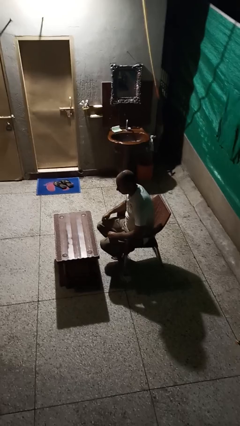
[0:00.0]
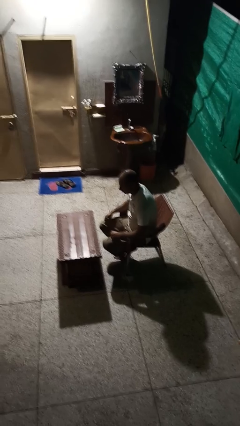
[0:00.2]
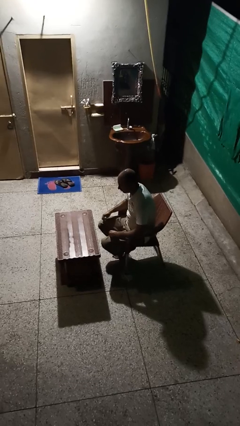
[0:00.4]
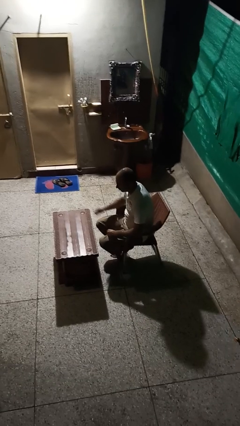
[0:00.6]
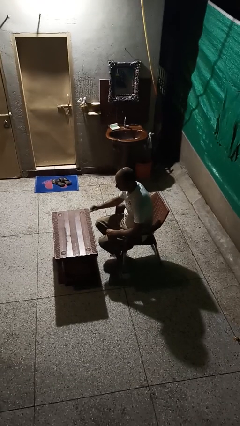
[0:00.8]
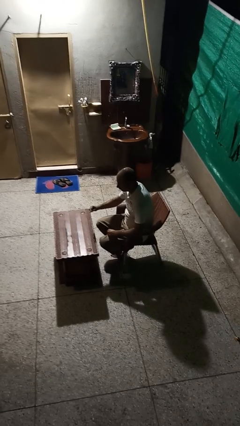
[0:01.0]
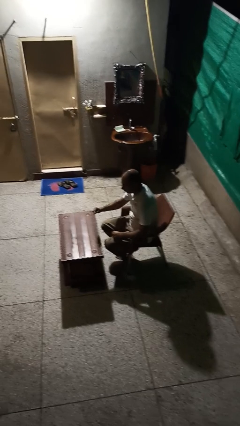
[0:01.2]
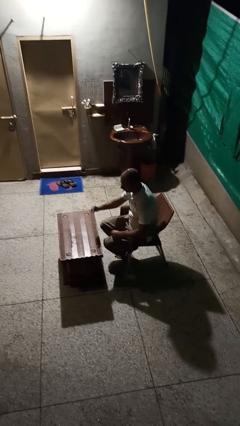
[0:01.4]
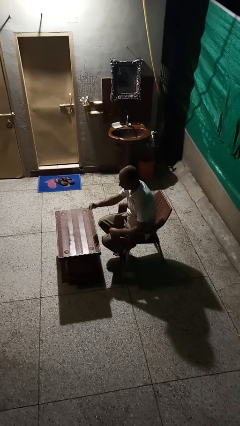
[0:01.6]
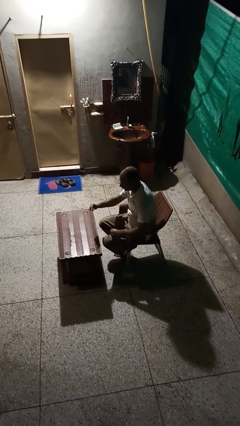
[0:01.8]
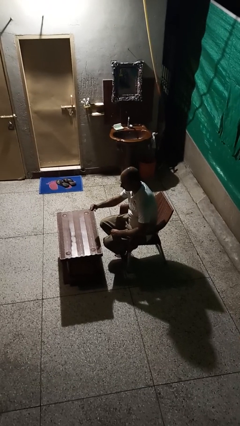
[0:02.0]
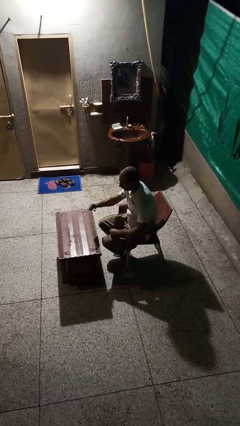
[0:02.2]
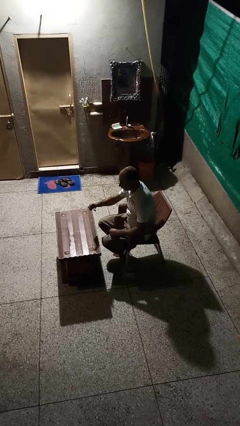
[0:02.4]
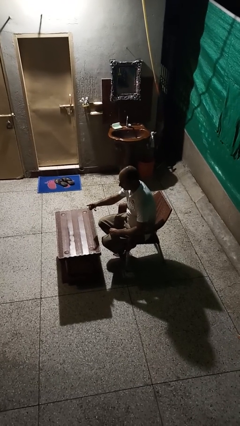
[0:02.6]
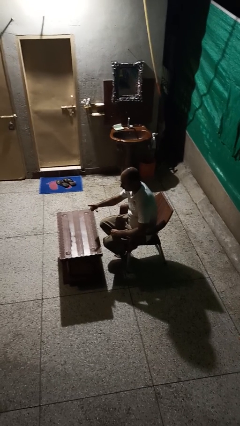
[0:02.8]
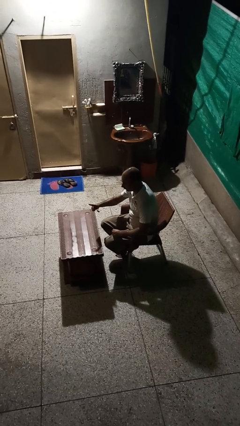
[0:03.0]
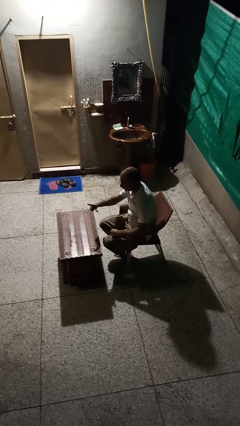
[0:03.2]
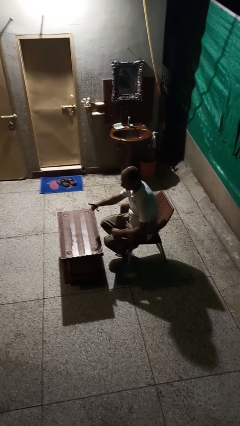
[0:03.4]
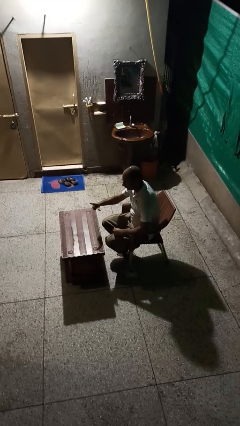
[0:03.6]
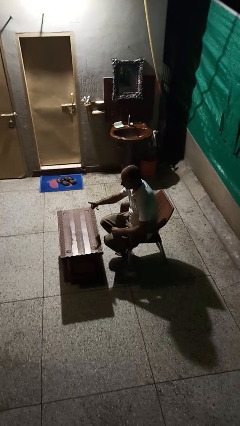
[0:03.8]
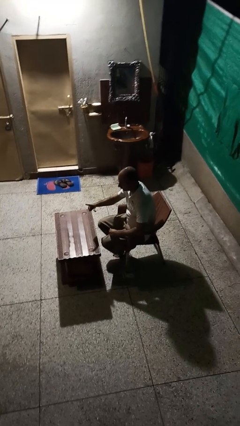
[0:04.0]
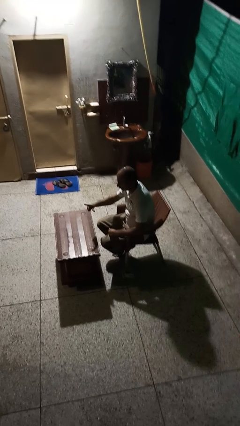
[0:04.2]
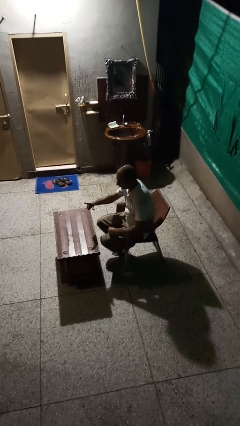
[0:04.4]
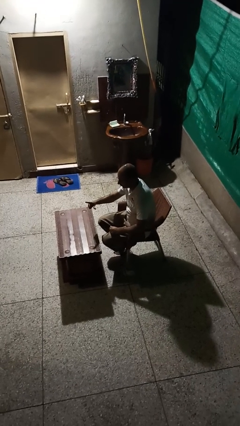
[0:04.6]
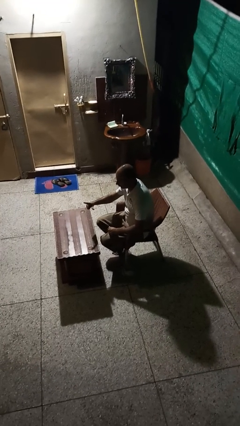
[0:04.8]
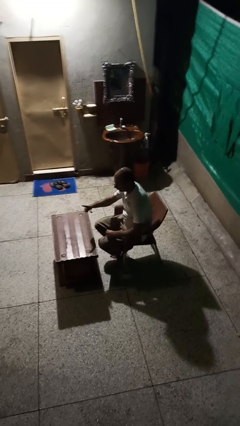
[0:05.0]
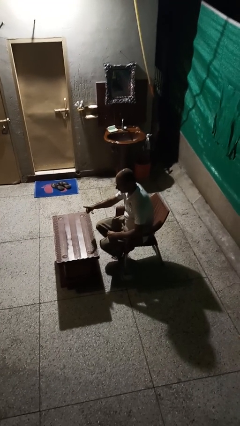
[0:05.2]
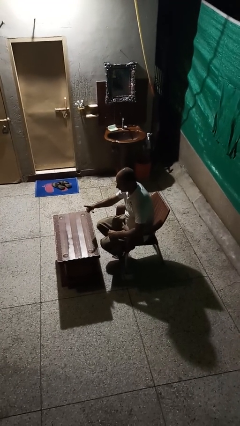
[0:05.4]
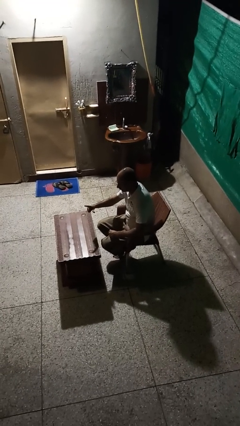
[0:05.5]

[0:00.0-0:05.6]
person gestures zoom in

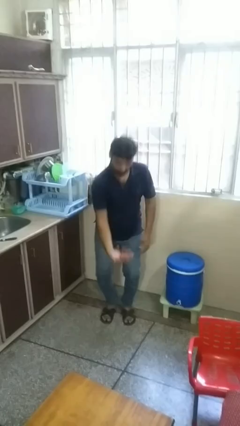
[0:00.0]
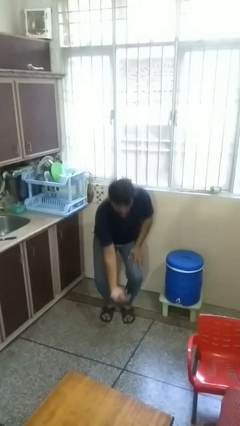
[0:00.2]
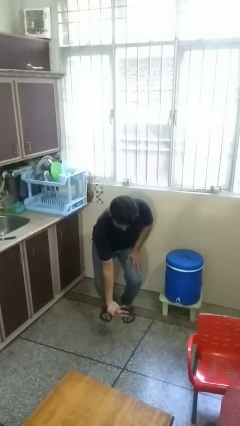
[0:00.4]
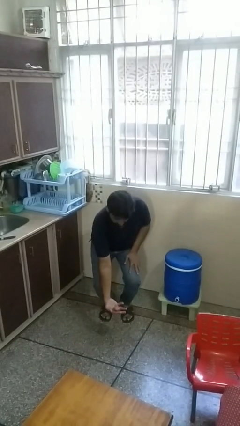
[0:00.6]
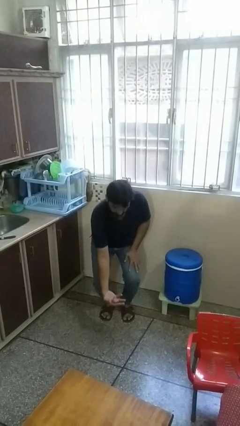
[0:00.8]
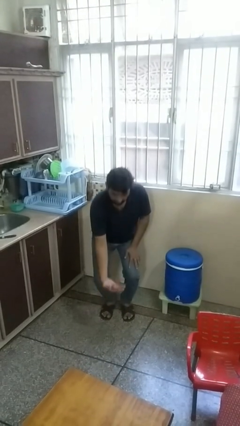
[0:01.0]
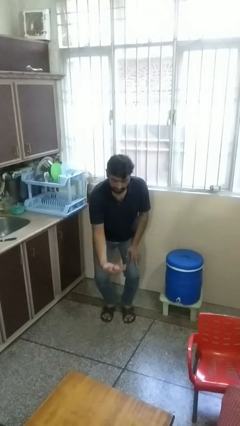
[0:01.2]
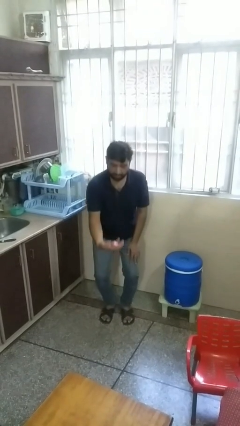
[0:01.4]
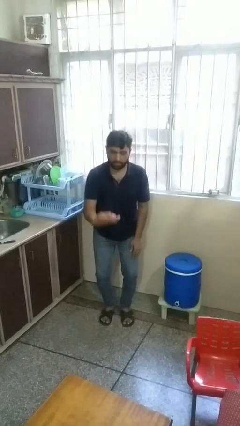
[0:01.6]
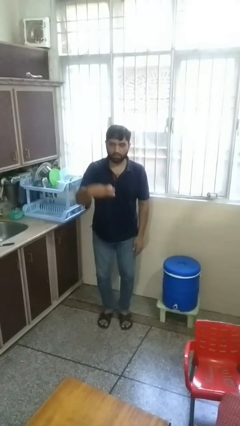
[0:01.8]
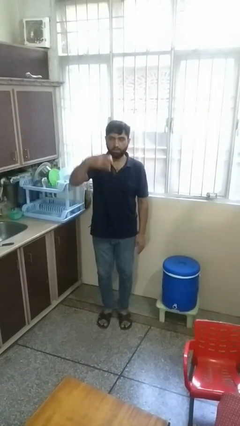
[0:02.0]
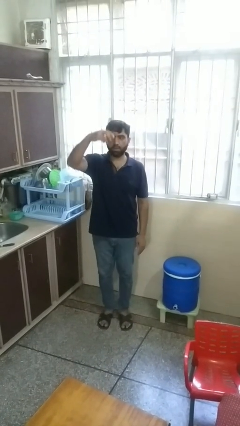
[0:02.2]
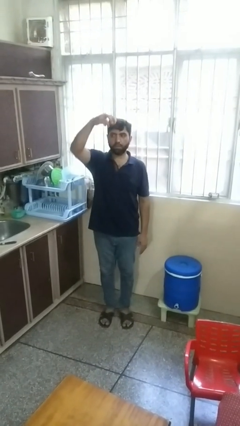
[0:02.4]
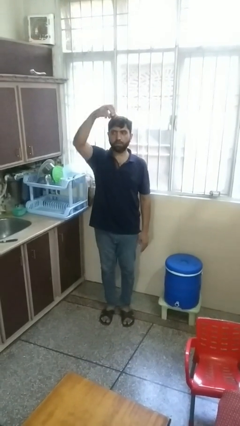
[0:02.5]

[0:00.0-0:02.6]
person catches dropped object

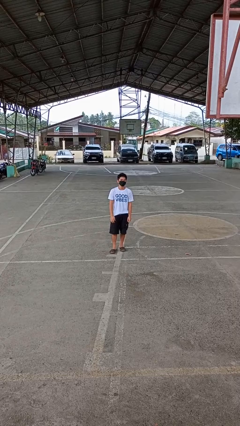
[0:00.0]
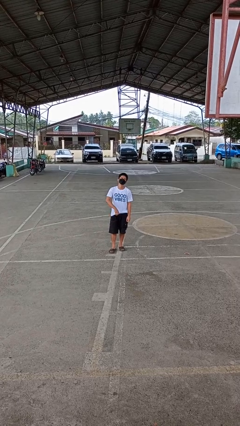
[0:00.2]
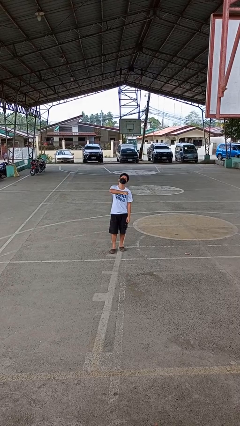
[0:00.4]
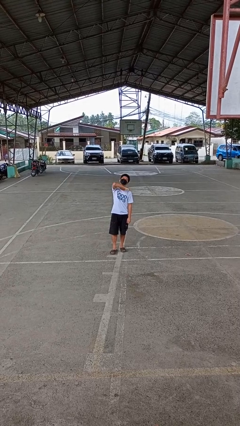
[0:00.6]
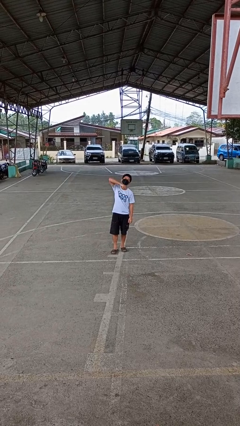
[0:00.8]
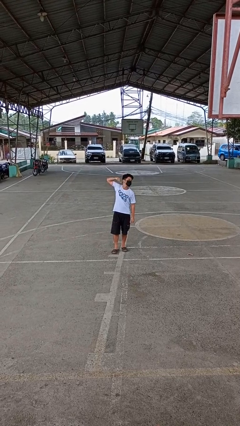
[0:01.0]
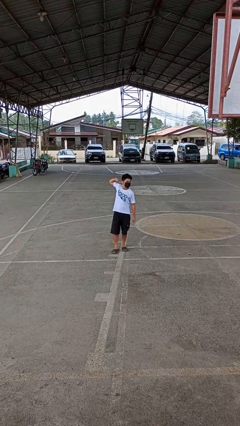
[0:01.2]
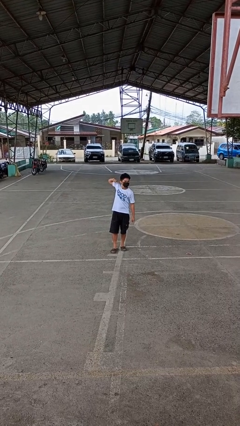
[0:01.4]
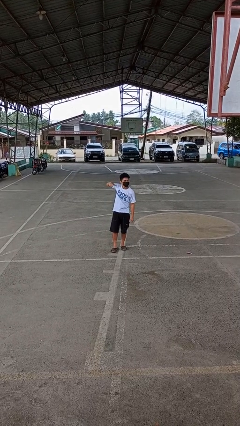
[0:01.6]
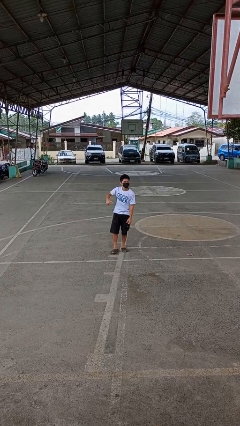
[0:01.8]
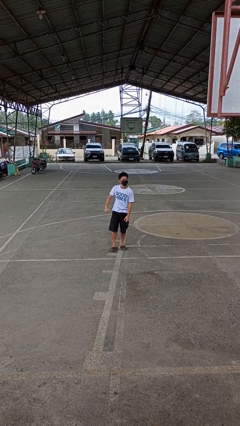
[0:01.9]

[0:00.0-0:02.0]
person gestures cut

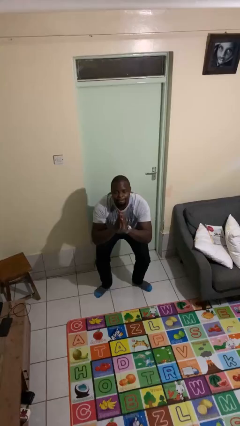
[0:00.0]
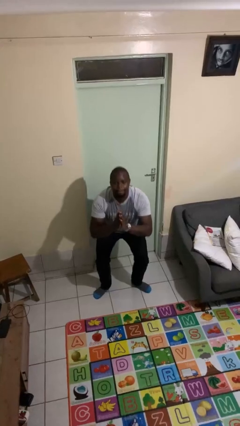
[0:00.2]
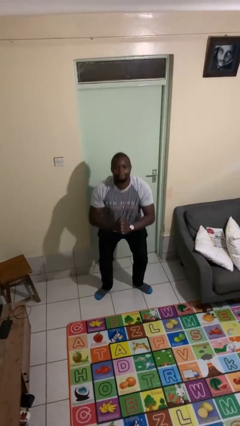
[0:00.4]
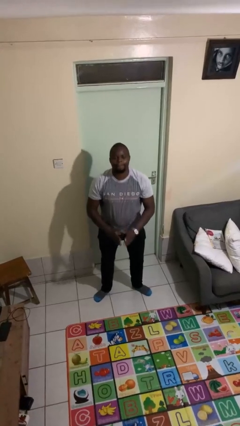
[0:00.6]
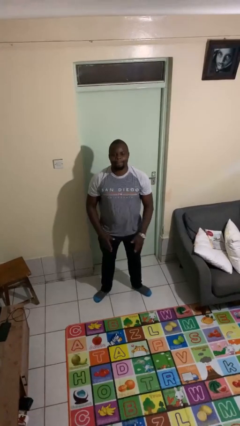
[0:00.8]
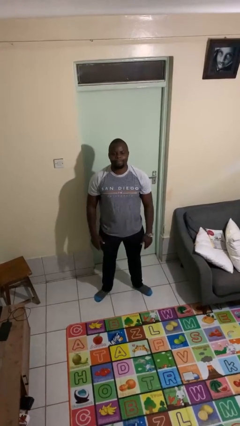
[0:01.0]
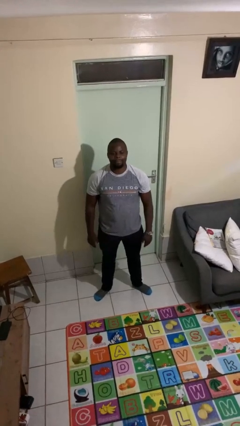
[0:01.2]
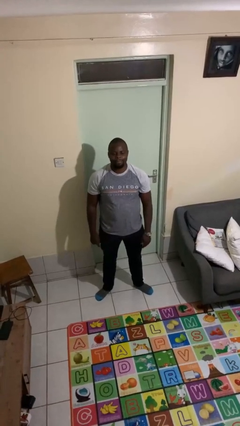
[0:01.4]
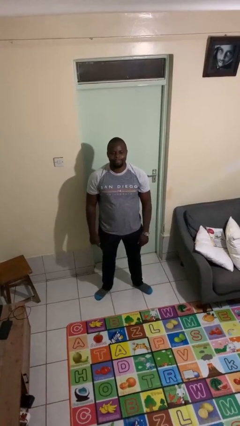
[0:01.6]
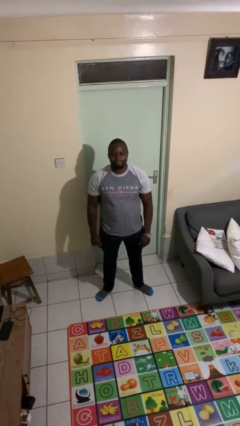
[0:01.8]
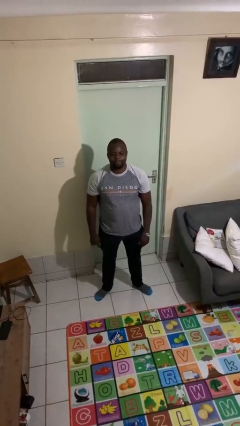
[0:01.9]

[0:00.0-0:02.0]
person stands up

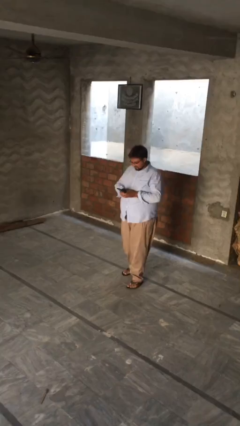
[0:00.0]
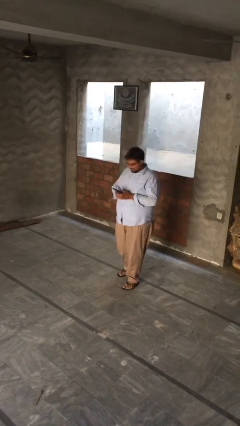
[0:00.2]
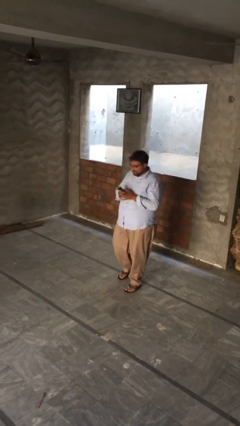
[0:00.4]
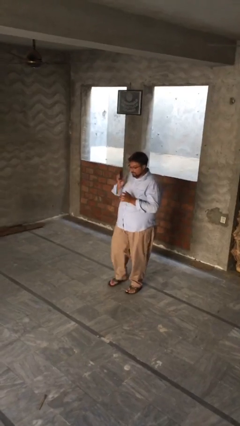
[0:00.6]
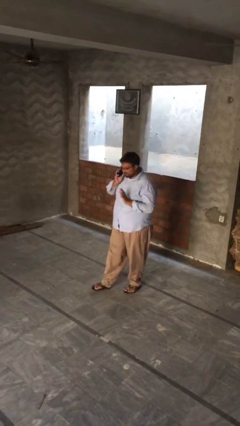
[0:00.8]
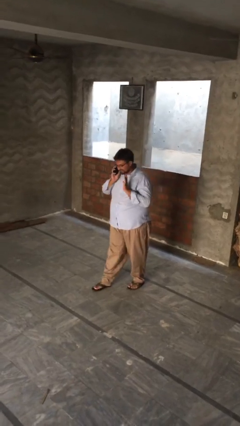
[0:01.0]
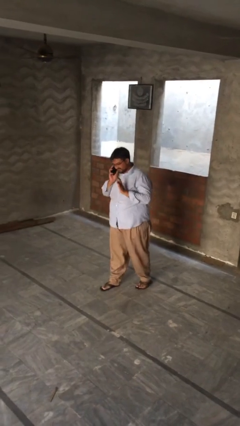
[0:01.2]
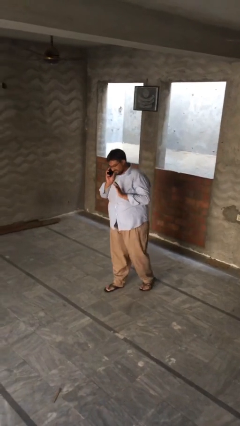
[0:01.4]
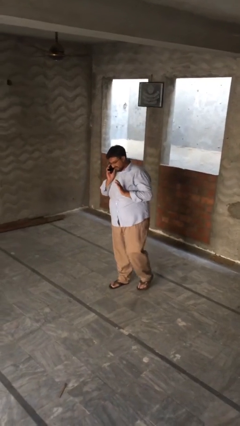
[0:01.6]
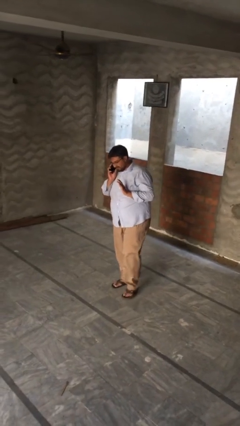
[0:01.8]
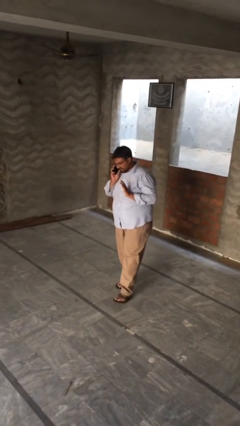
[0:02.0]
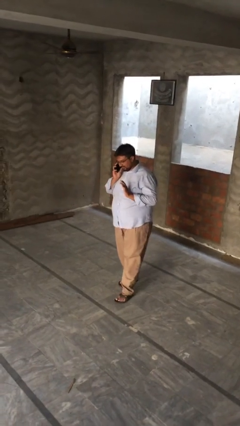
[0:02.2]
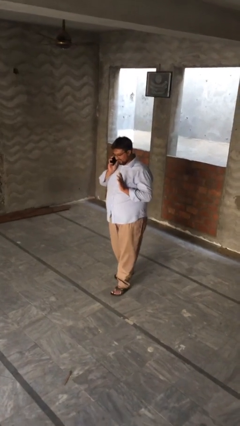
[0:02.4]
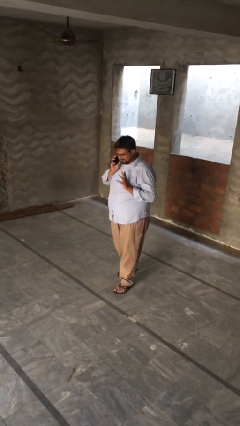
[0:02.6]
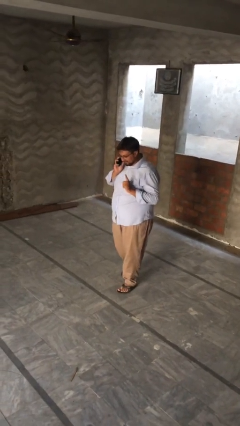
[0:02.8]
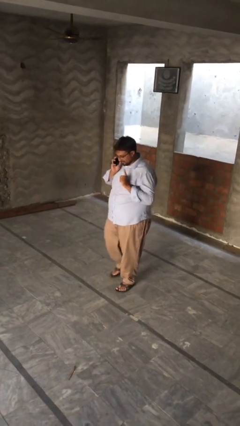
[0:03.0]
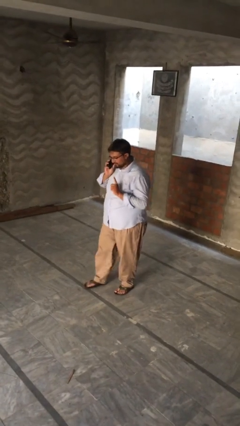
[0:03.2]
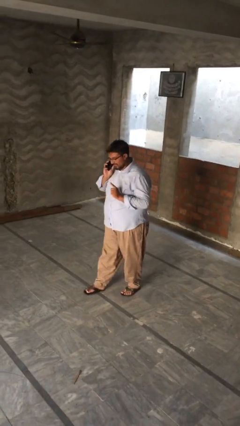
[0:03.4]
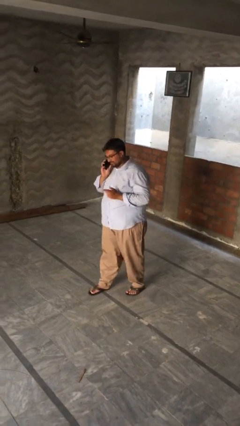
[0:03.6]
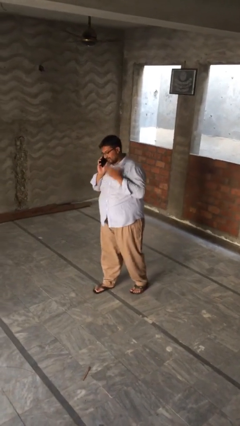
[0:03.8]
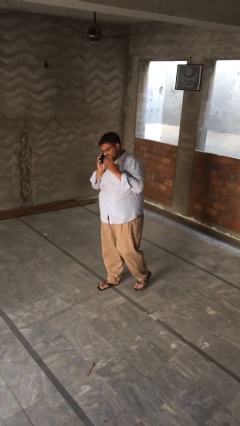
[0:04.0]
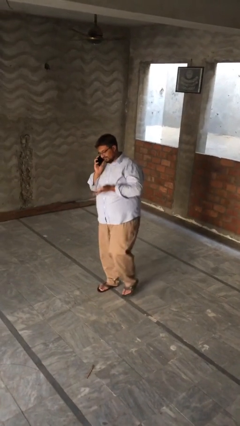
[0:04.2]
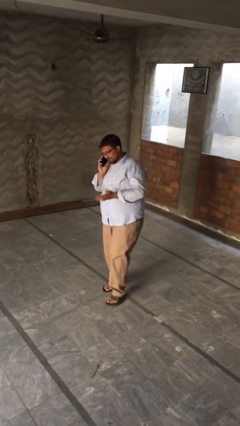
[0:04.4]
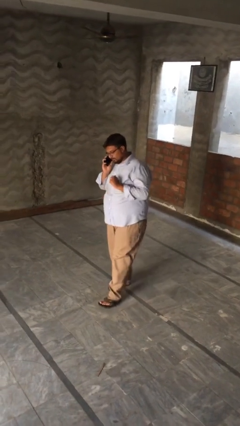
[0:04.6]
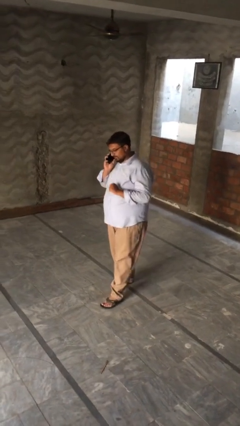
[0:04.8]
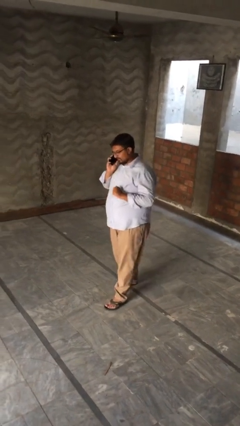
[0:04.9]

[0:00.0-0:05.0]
person talks on phone

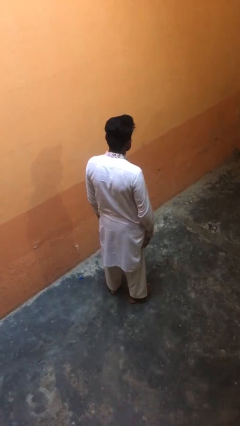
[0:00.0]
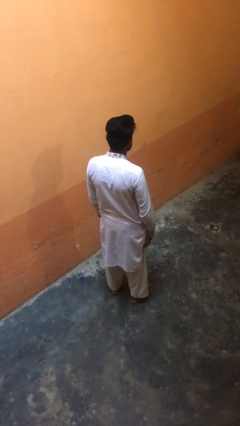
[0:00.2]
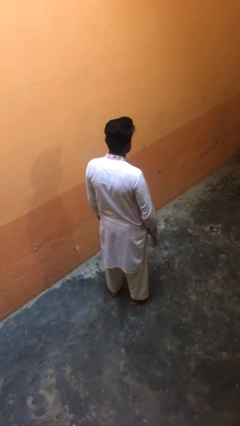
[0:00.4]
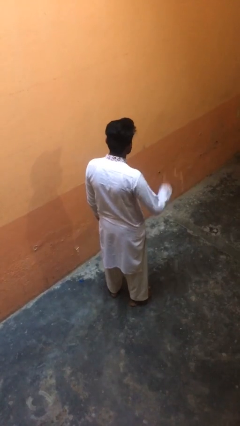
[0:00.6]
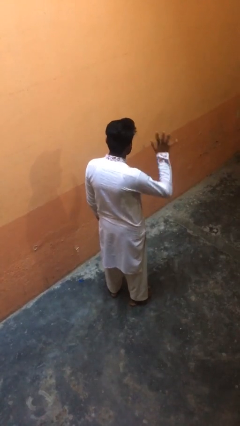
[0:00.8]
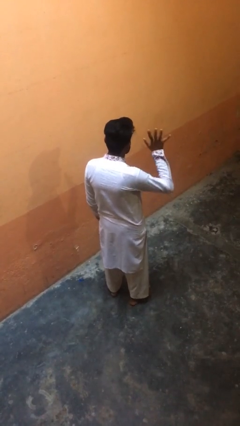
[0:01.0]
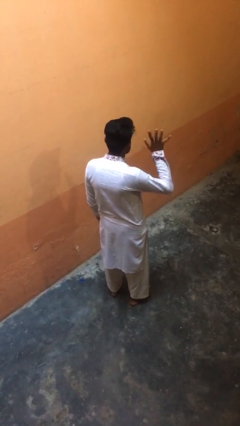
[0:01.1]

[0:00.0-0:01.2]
person gestures number five
